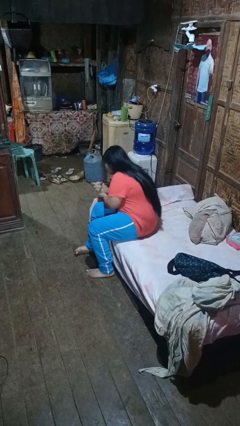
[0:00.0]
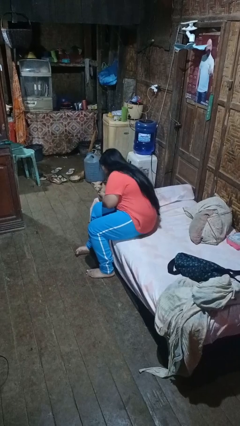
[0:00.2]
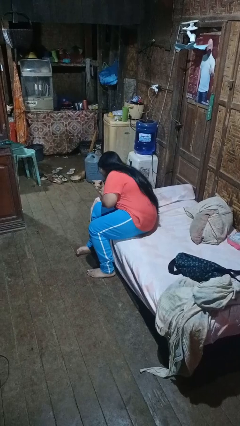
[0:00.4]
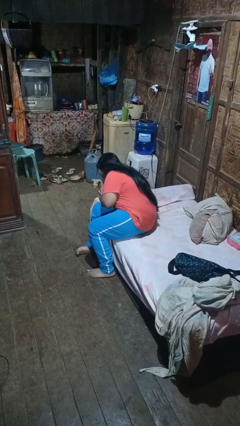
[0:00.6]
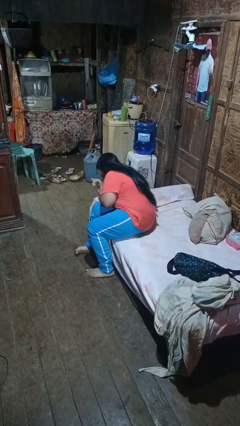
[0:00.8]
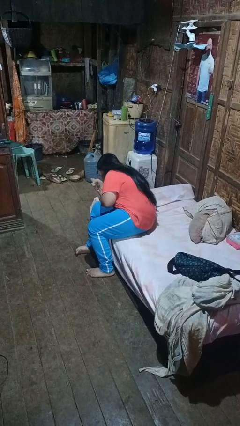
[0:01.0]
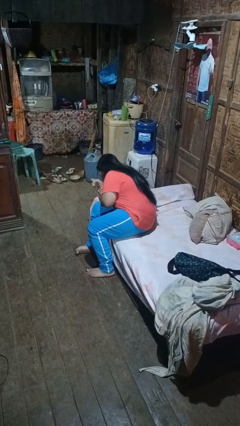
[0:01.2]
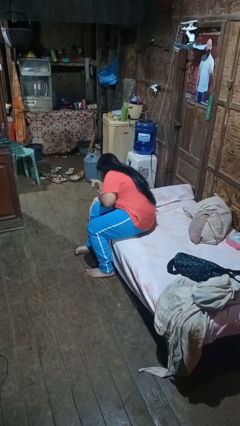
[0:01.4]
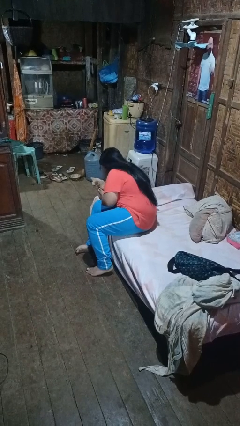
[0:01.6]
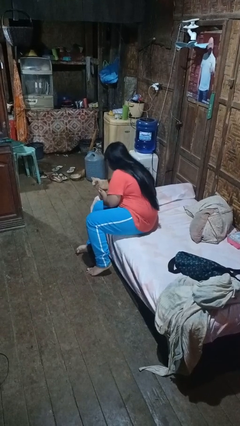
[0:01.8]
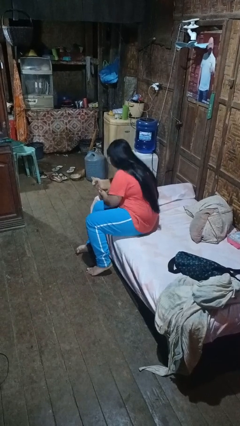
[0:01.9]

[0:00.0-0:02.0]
person hugs cat

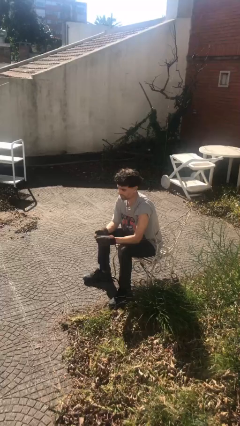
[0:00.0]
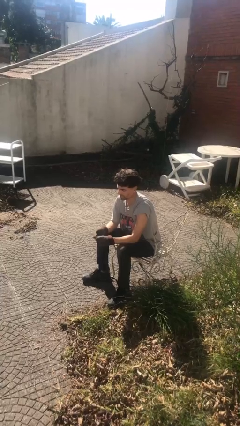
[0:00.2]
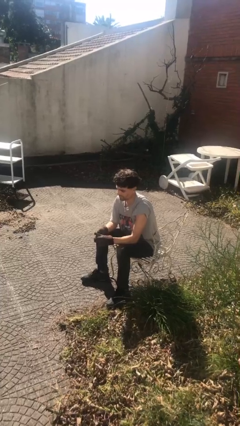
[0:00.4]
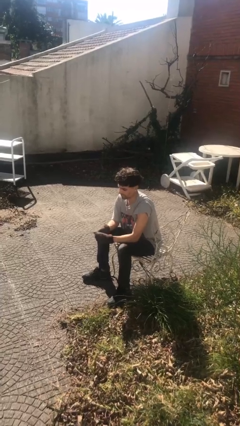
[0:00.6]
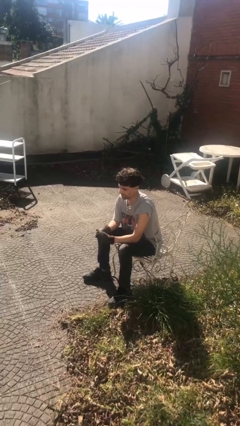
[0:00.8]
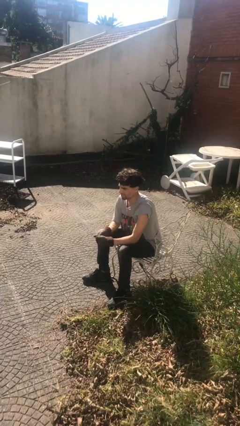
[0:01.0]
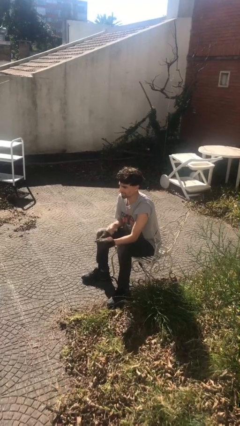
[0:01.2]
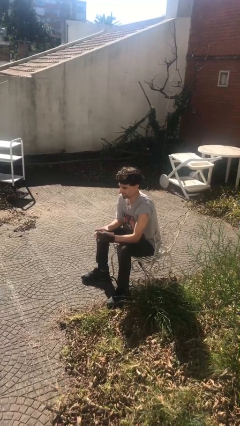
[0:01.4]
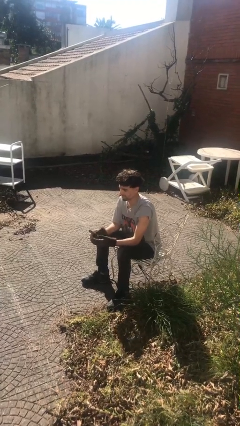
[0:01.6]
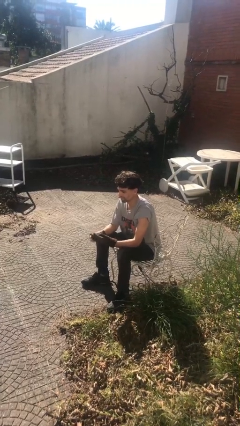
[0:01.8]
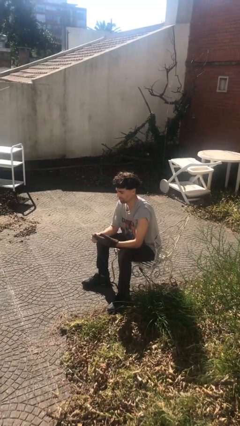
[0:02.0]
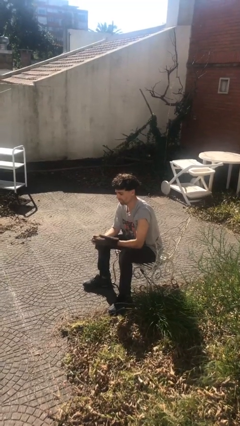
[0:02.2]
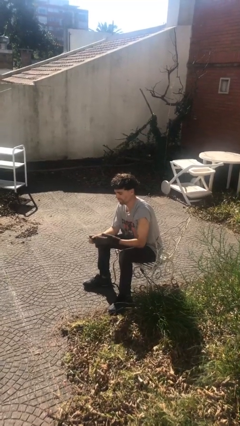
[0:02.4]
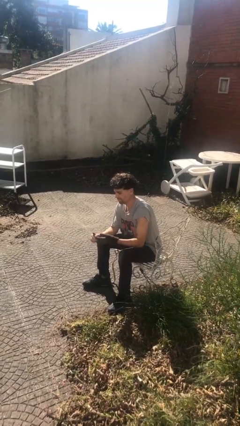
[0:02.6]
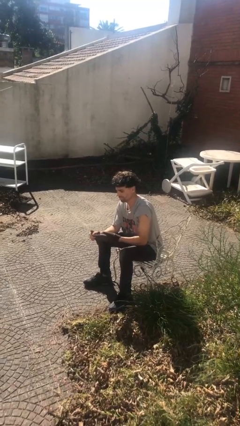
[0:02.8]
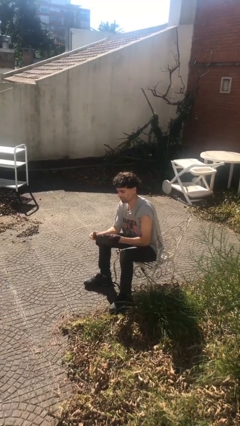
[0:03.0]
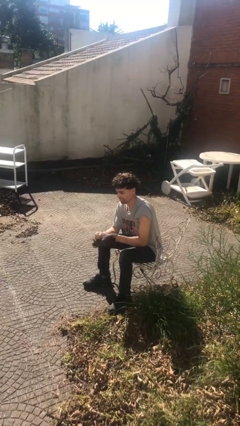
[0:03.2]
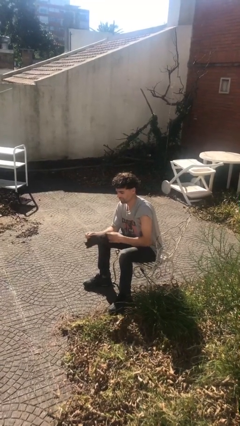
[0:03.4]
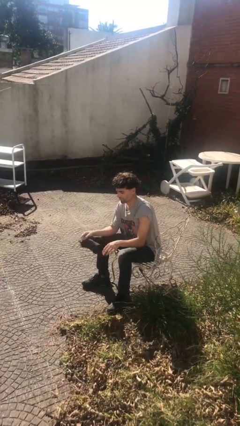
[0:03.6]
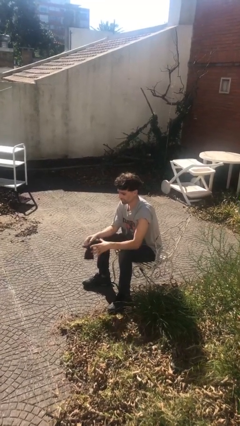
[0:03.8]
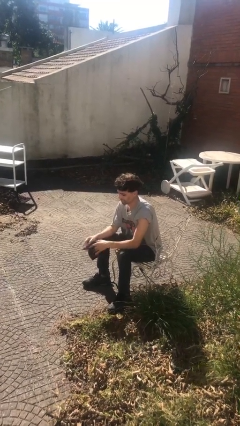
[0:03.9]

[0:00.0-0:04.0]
person takes off gloves

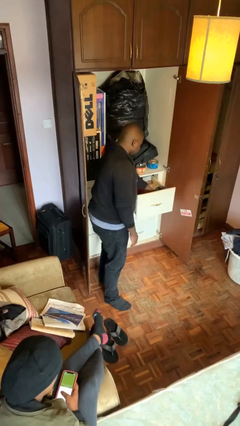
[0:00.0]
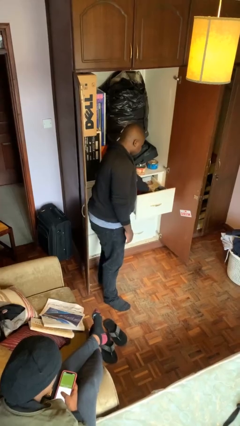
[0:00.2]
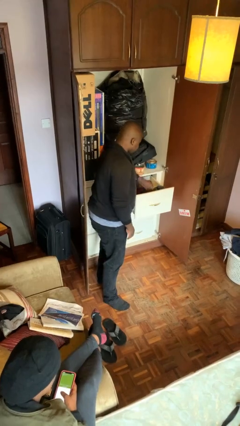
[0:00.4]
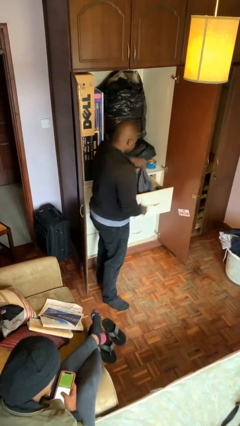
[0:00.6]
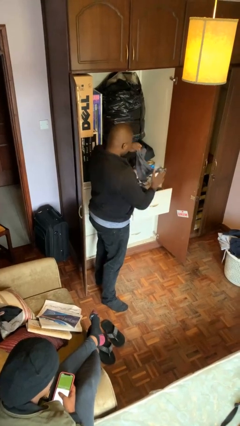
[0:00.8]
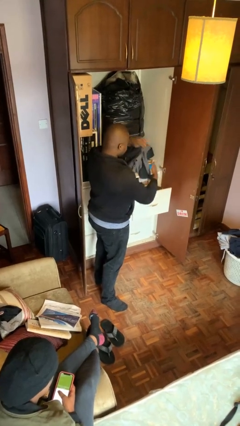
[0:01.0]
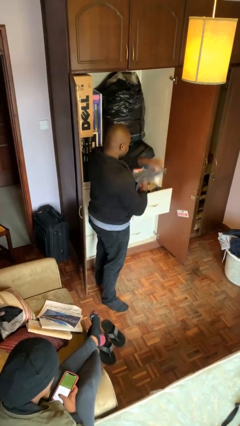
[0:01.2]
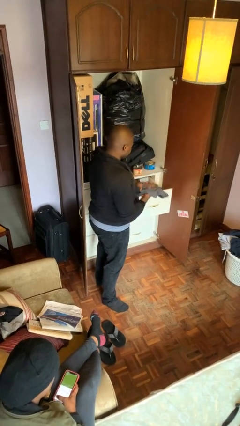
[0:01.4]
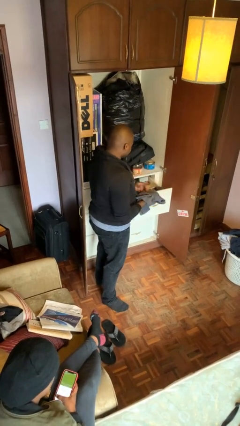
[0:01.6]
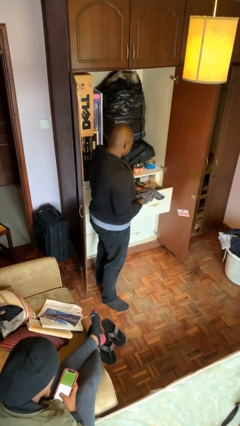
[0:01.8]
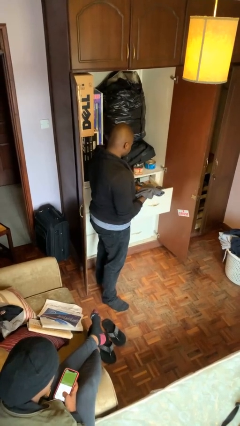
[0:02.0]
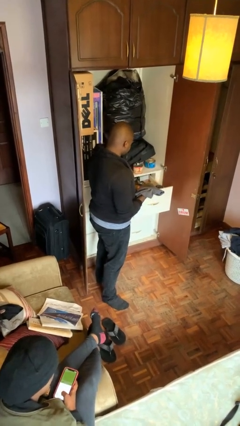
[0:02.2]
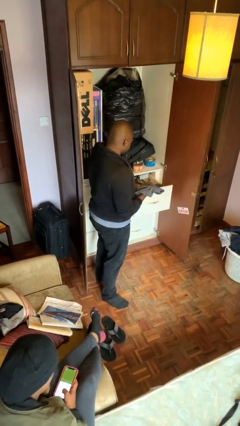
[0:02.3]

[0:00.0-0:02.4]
person takes clothes from dresser

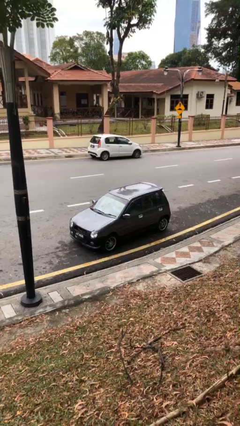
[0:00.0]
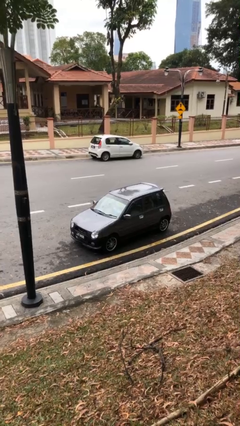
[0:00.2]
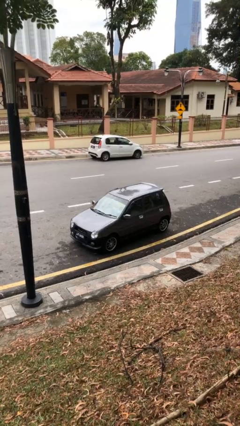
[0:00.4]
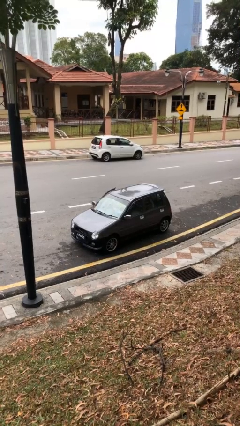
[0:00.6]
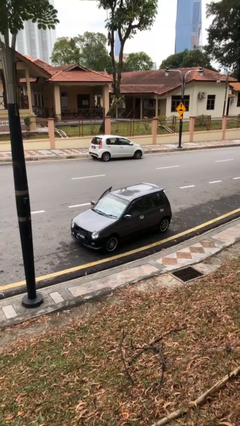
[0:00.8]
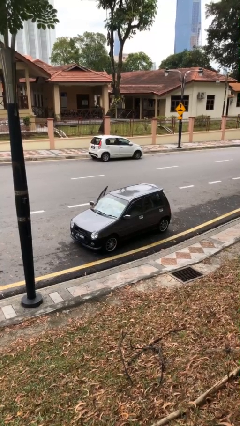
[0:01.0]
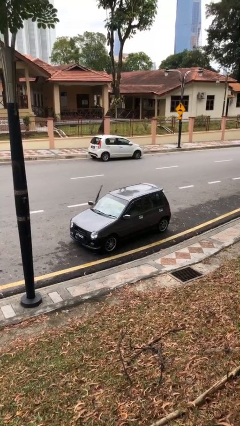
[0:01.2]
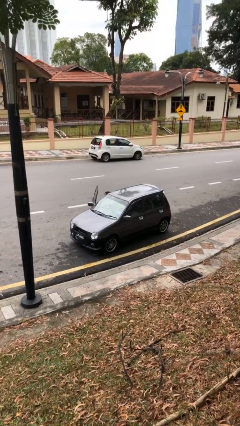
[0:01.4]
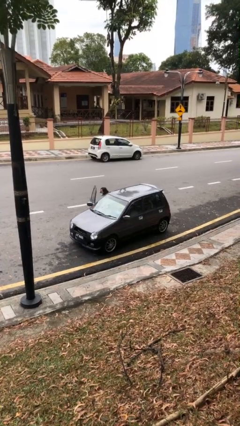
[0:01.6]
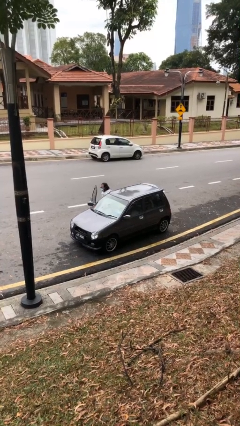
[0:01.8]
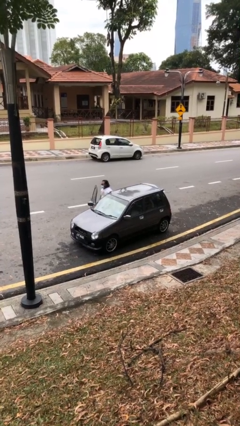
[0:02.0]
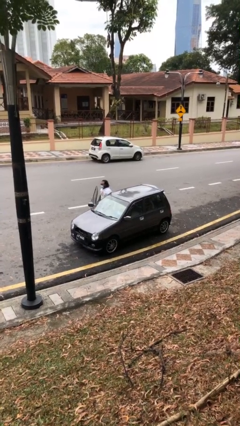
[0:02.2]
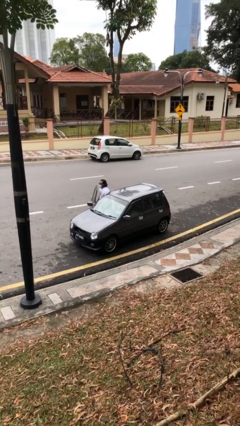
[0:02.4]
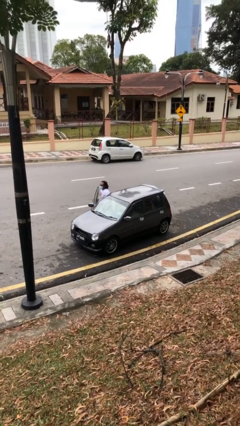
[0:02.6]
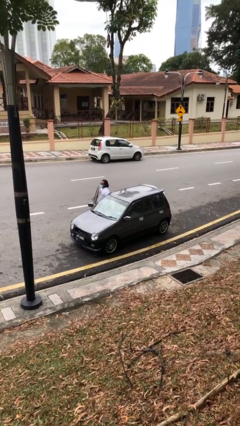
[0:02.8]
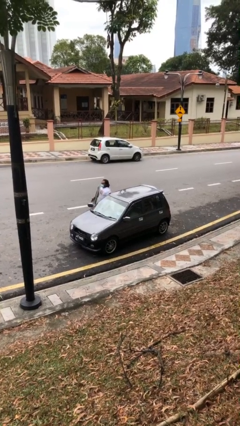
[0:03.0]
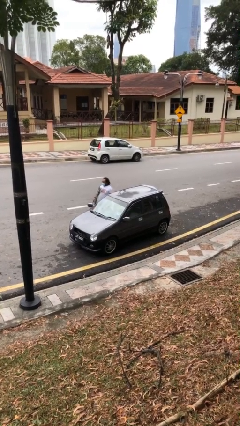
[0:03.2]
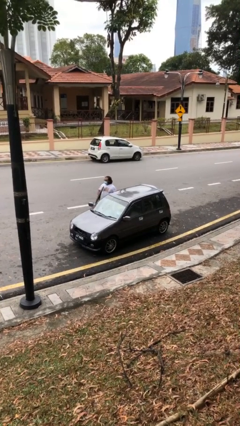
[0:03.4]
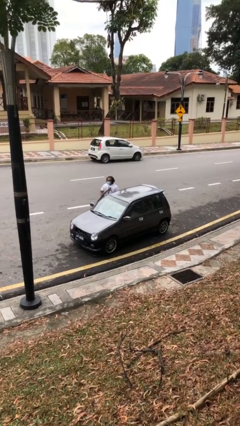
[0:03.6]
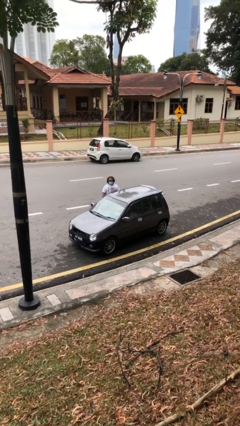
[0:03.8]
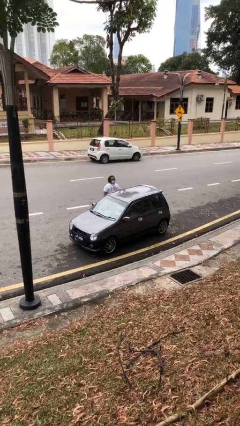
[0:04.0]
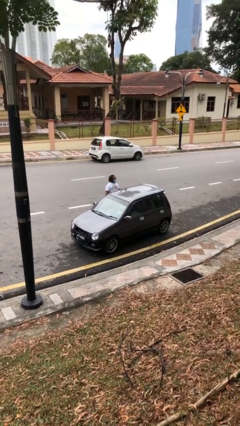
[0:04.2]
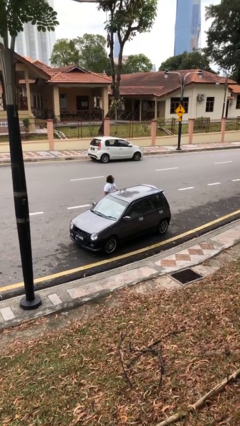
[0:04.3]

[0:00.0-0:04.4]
car drops off person

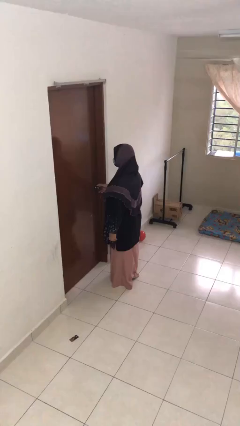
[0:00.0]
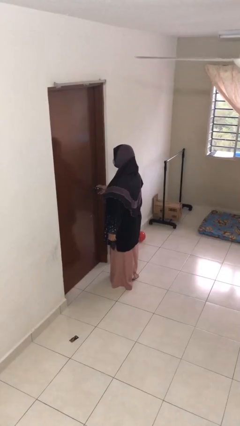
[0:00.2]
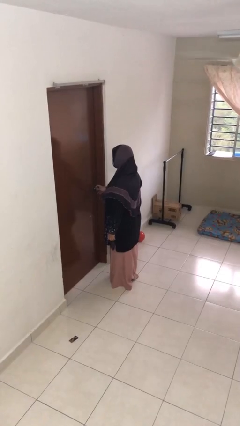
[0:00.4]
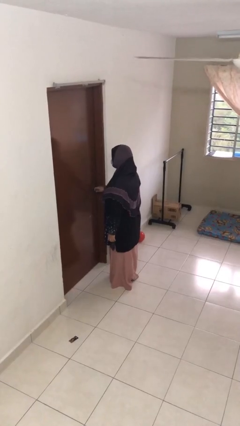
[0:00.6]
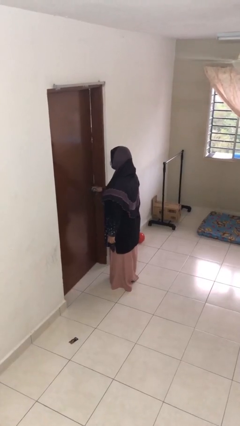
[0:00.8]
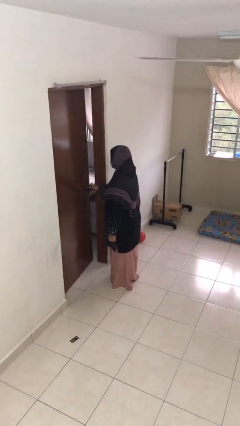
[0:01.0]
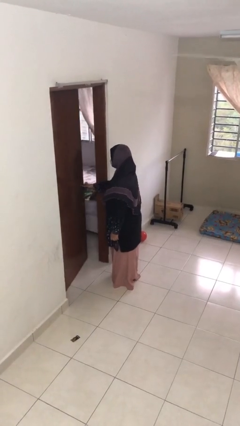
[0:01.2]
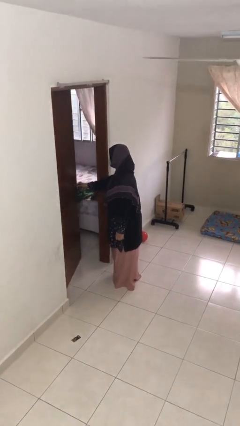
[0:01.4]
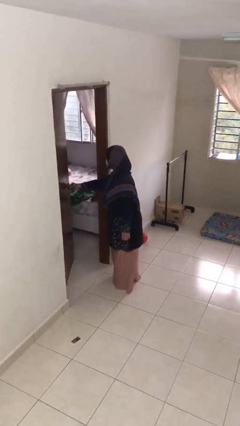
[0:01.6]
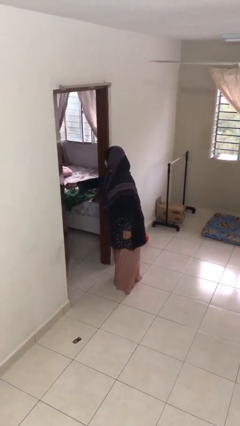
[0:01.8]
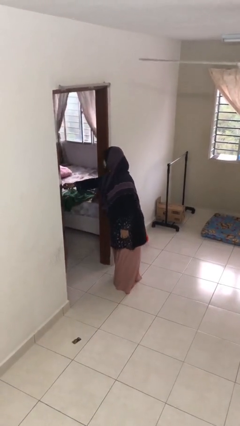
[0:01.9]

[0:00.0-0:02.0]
person opens facility door

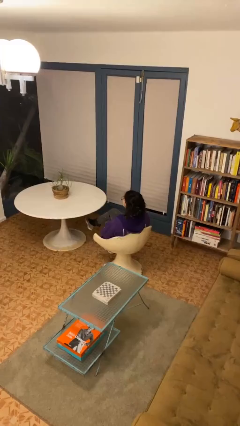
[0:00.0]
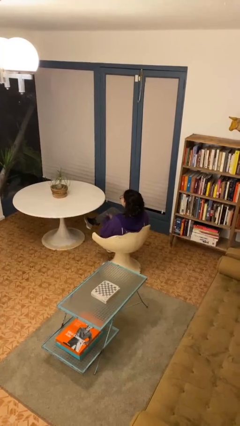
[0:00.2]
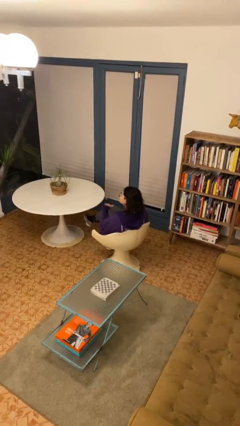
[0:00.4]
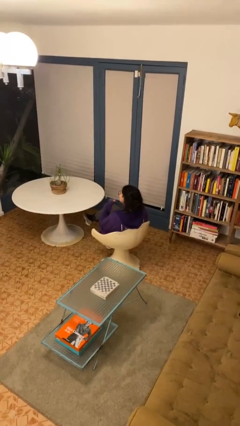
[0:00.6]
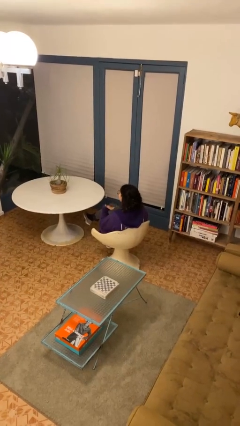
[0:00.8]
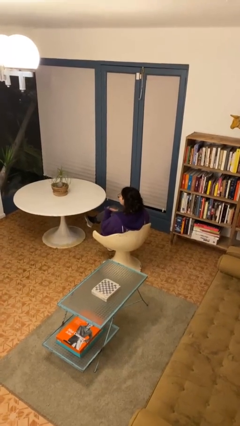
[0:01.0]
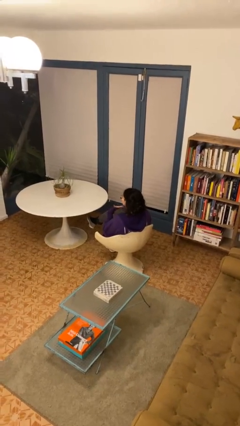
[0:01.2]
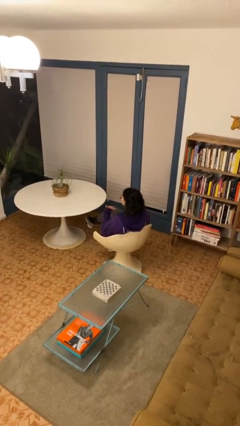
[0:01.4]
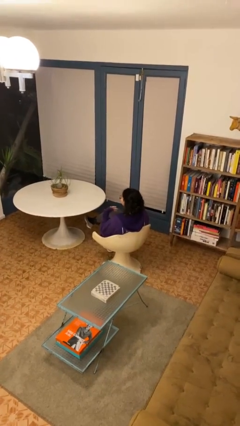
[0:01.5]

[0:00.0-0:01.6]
person gestures cut

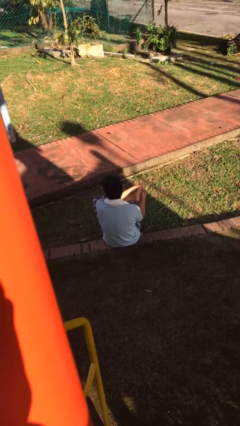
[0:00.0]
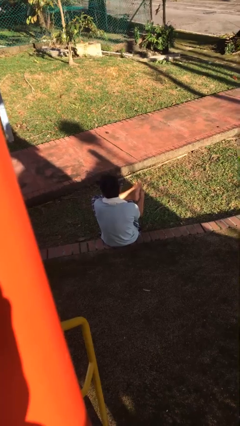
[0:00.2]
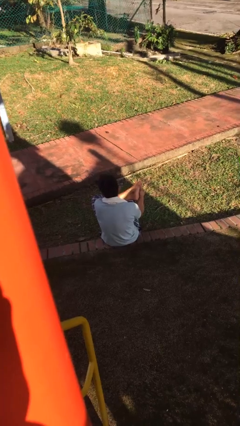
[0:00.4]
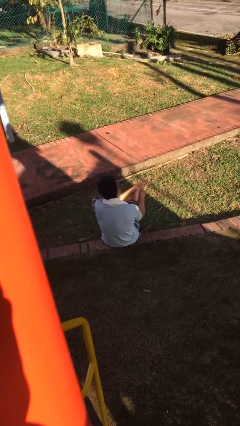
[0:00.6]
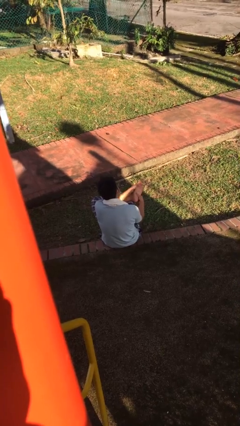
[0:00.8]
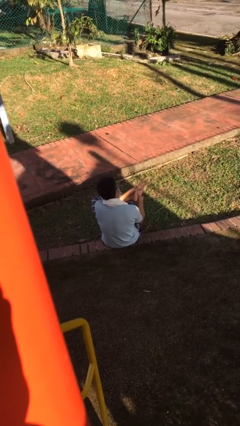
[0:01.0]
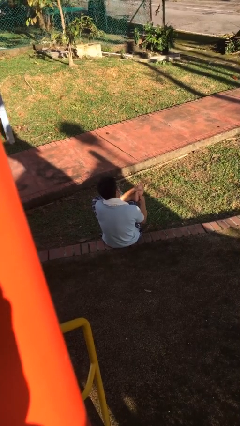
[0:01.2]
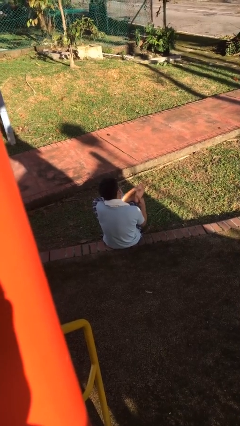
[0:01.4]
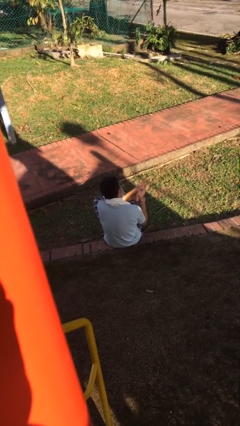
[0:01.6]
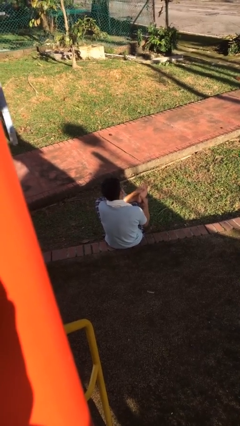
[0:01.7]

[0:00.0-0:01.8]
person rubs foot
